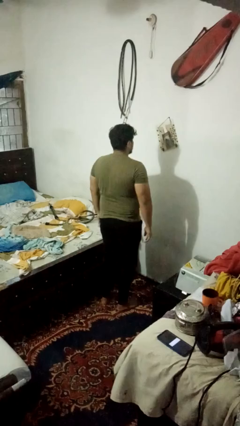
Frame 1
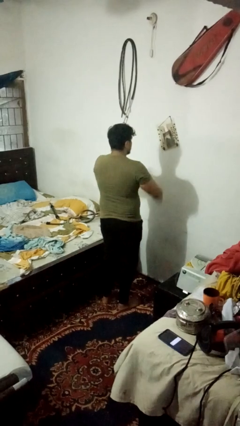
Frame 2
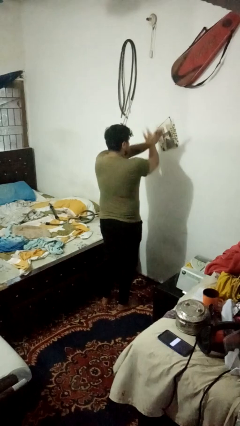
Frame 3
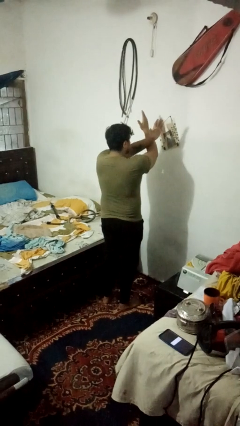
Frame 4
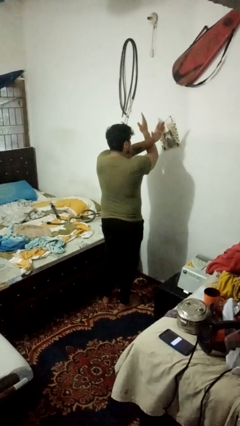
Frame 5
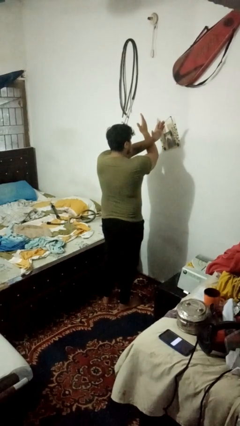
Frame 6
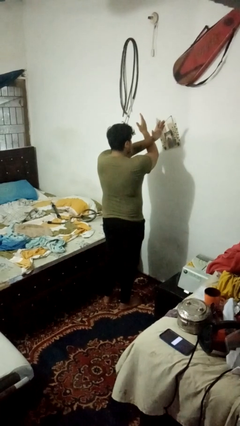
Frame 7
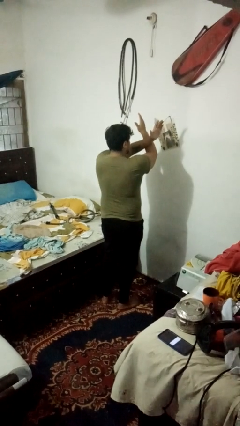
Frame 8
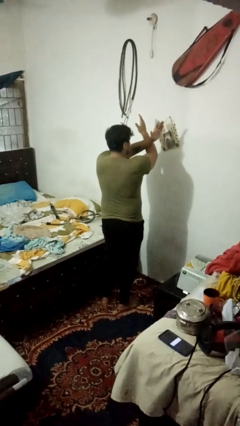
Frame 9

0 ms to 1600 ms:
person gestures arms x

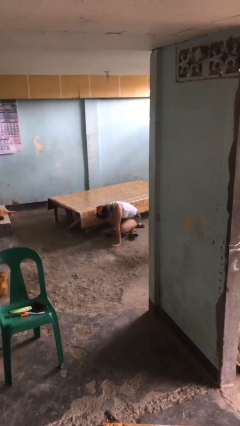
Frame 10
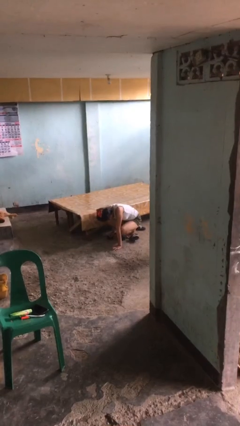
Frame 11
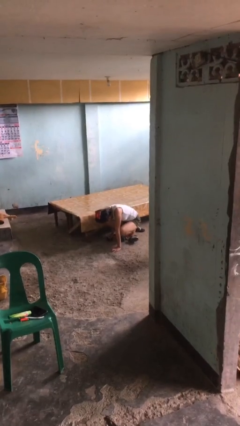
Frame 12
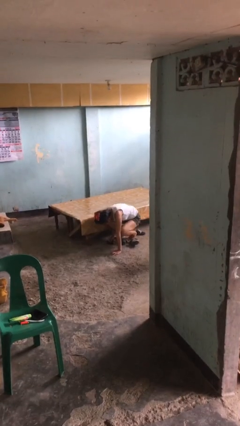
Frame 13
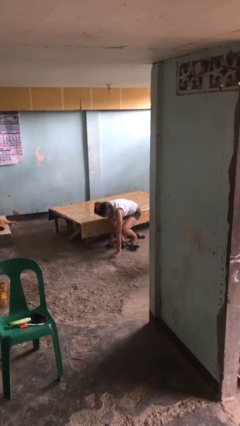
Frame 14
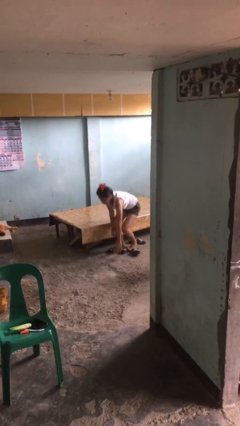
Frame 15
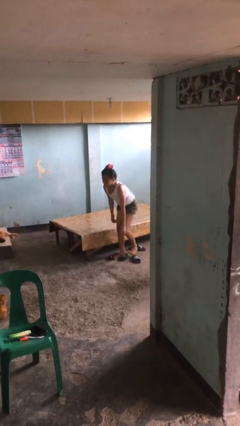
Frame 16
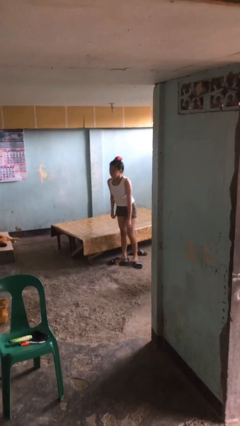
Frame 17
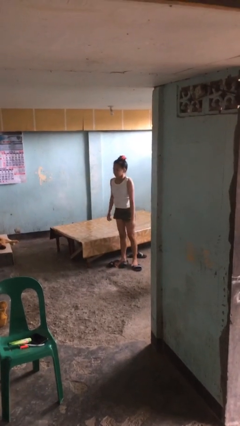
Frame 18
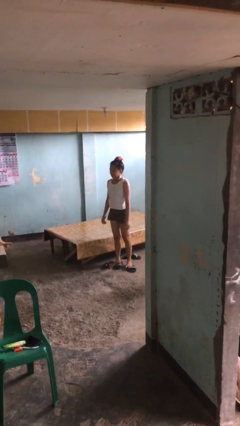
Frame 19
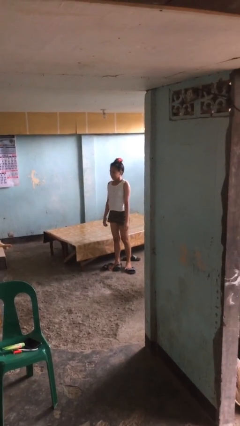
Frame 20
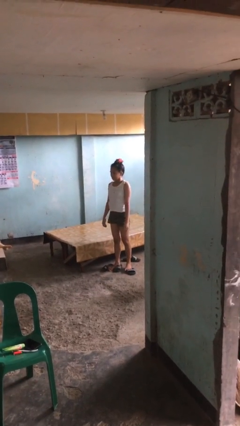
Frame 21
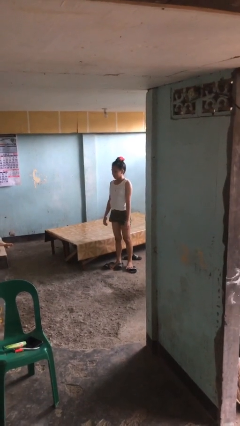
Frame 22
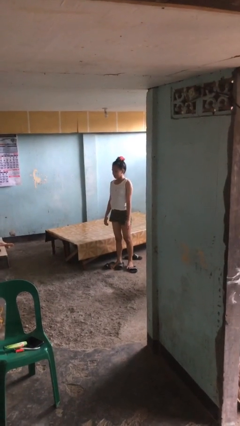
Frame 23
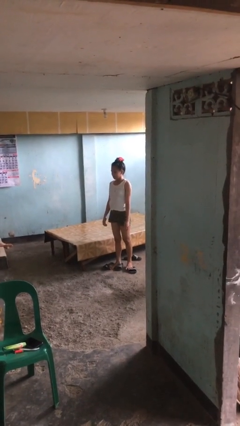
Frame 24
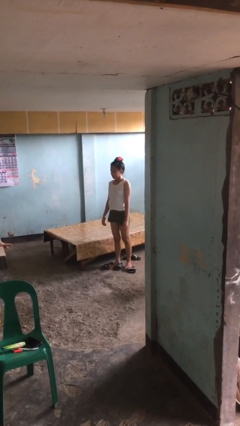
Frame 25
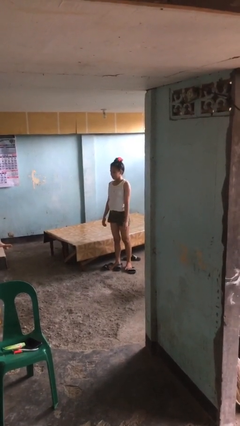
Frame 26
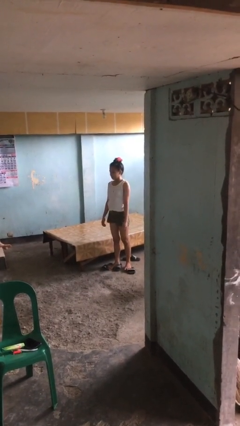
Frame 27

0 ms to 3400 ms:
person stands up from floor

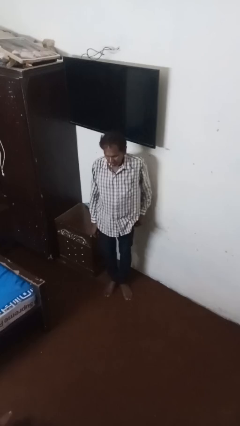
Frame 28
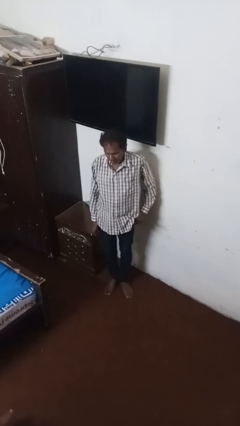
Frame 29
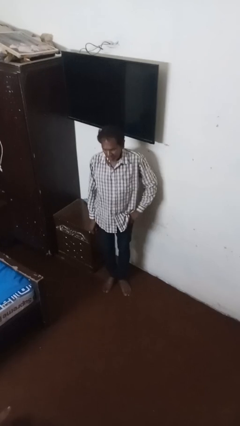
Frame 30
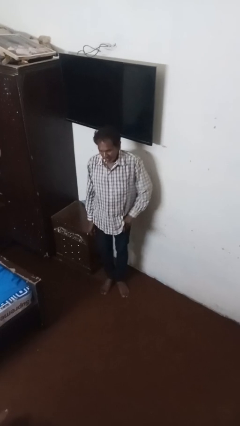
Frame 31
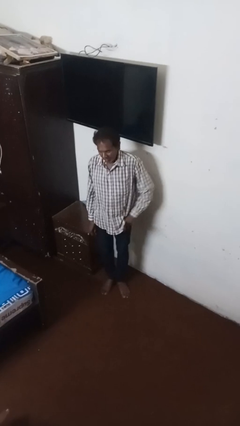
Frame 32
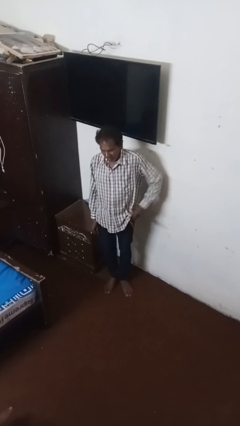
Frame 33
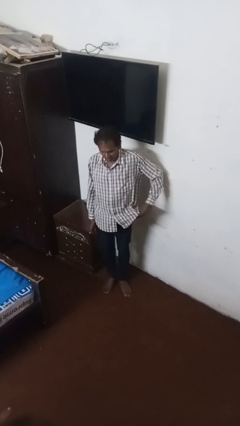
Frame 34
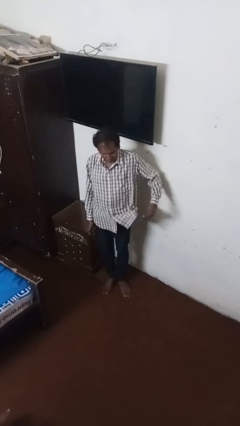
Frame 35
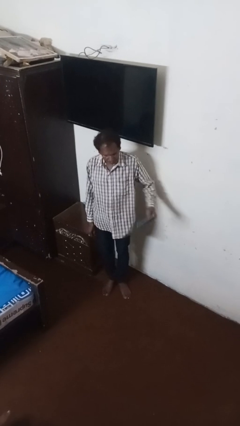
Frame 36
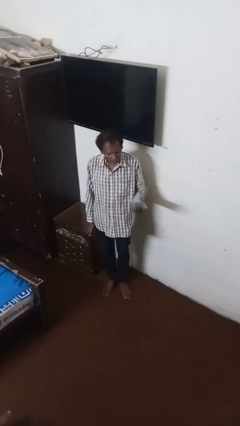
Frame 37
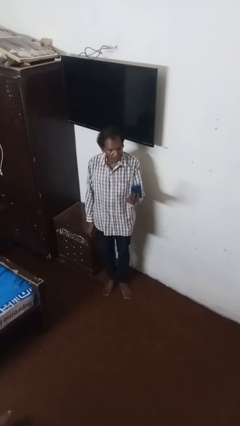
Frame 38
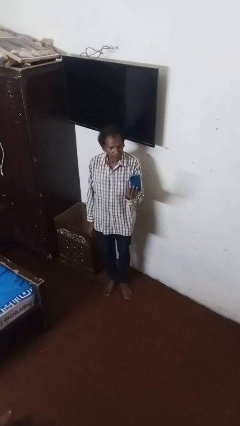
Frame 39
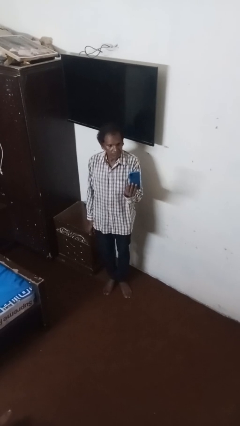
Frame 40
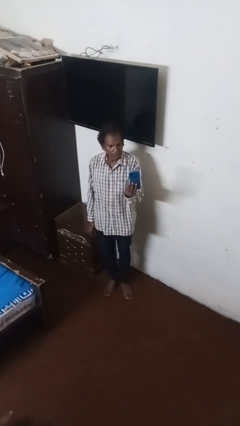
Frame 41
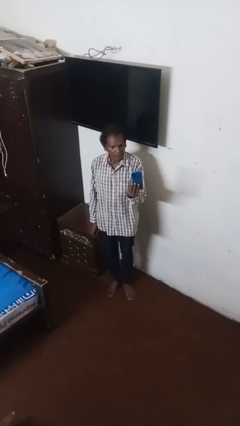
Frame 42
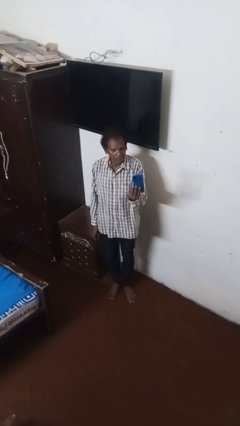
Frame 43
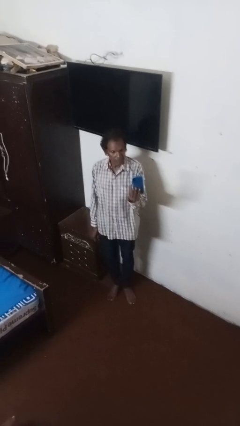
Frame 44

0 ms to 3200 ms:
person takes phone from pocket

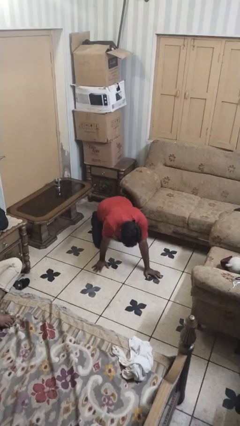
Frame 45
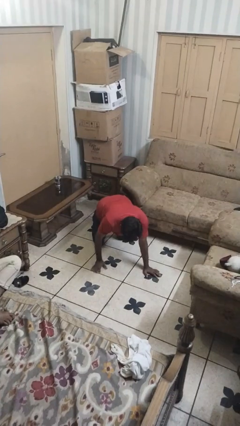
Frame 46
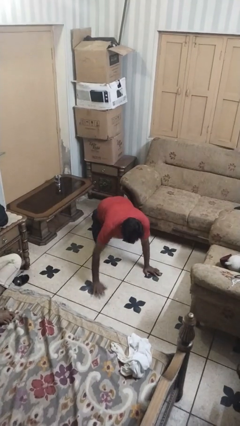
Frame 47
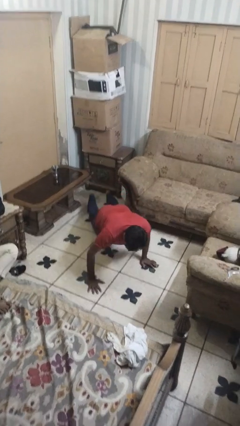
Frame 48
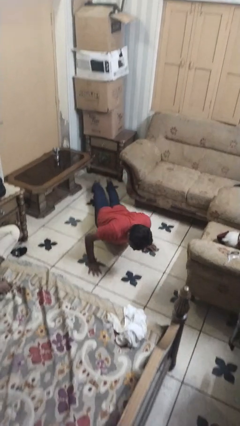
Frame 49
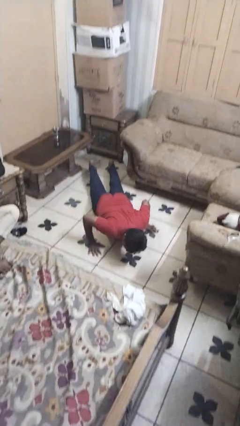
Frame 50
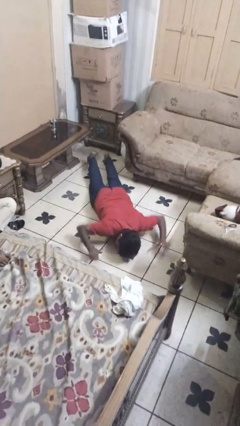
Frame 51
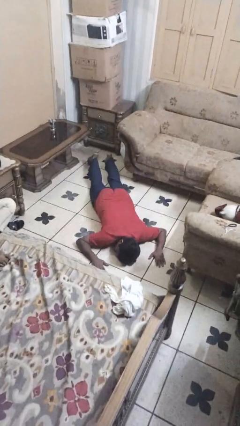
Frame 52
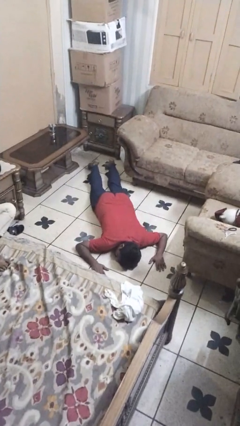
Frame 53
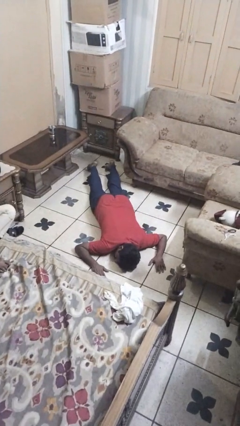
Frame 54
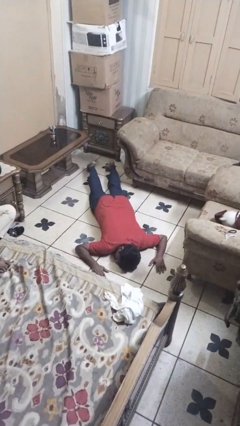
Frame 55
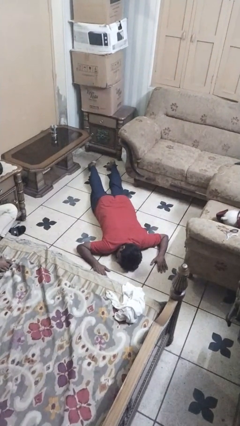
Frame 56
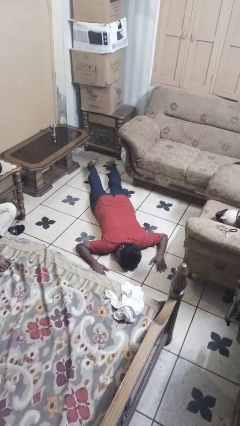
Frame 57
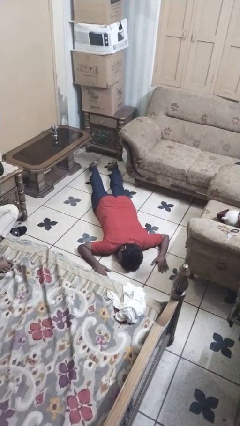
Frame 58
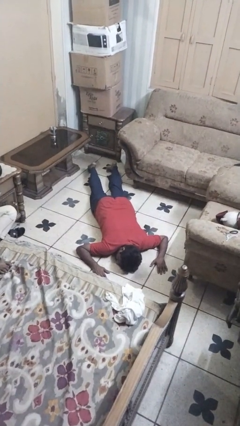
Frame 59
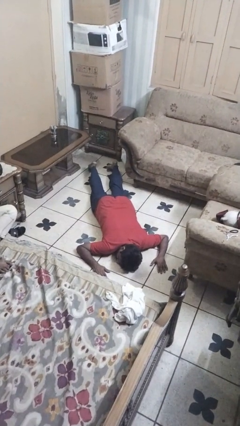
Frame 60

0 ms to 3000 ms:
person lies down on floor

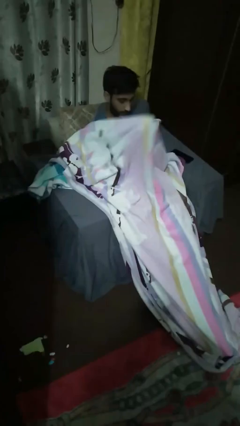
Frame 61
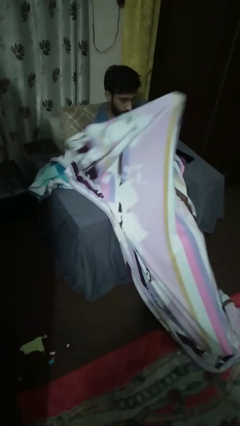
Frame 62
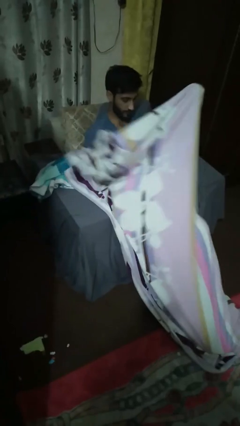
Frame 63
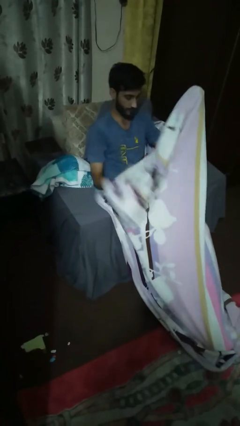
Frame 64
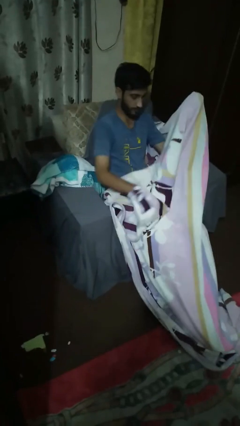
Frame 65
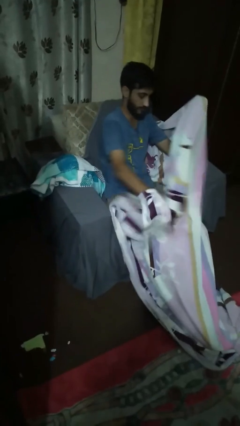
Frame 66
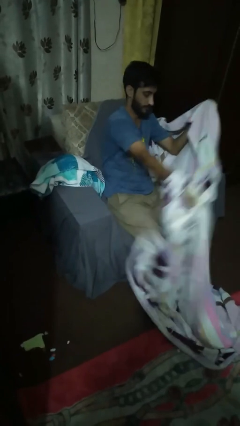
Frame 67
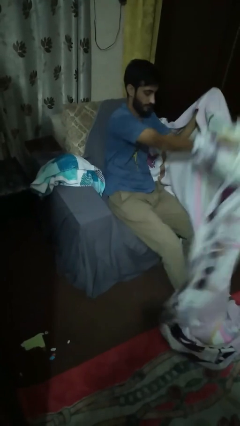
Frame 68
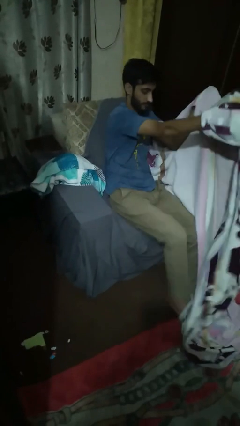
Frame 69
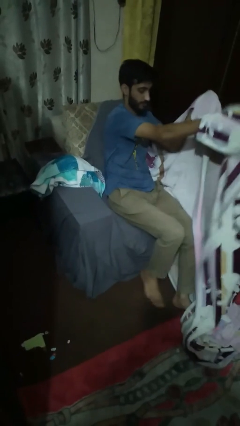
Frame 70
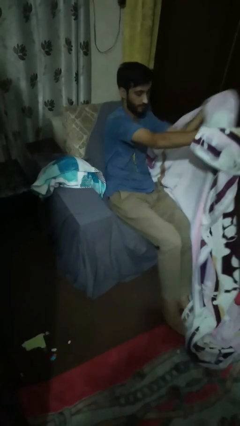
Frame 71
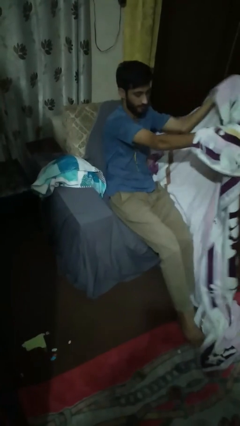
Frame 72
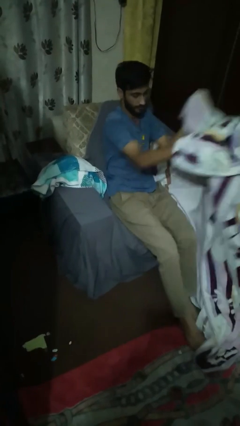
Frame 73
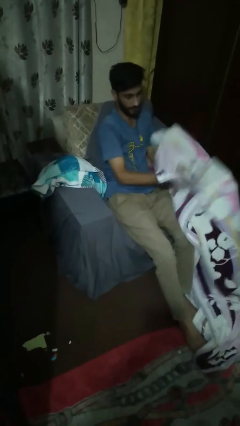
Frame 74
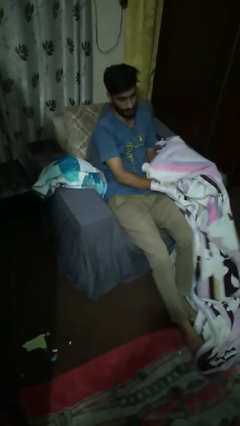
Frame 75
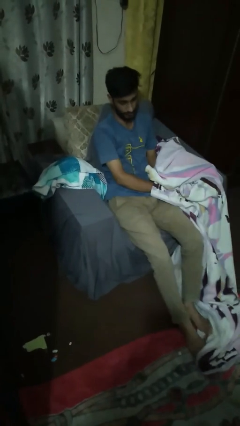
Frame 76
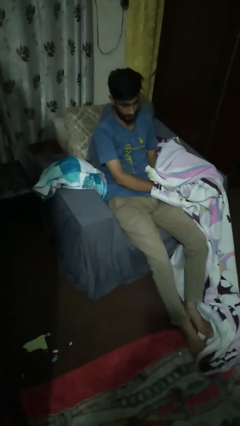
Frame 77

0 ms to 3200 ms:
person uncovers with blanket

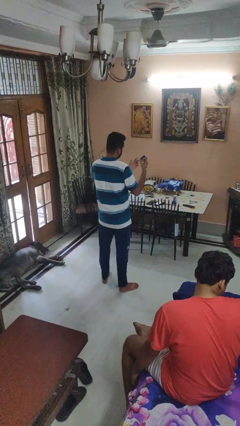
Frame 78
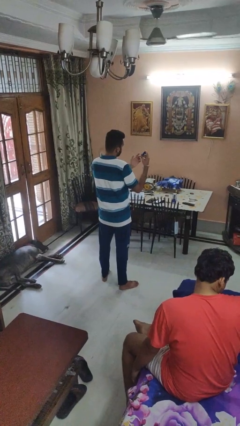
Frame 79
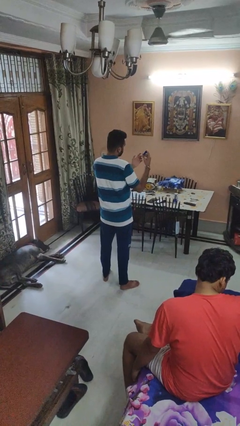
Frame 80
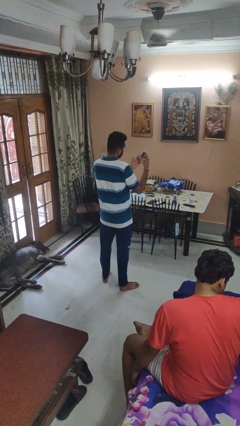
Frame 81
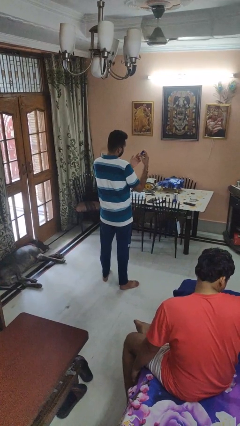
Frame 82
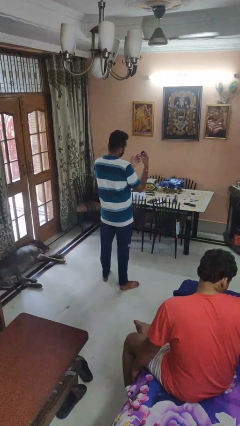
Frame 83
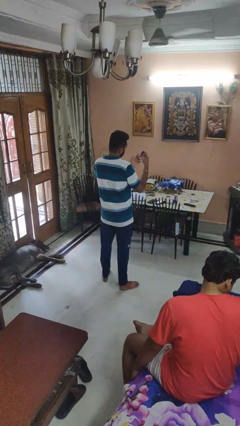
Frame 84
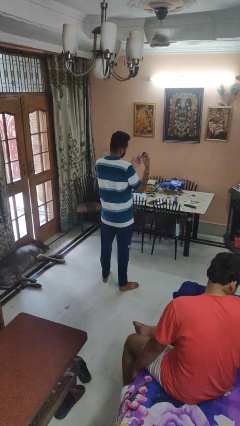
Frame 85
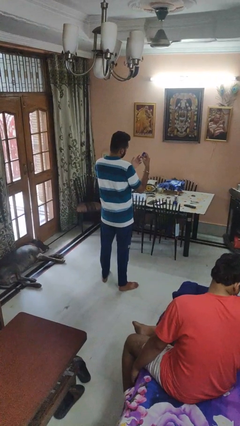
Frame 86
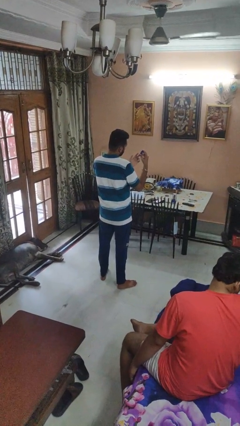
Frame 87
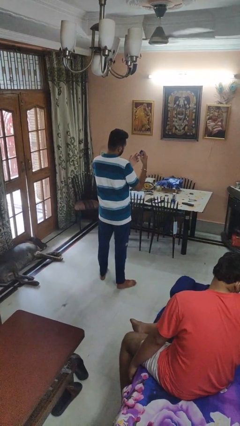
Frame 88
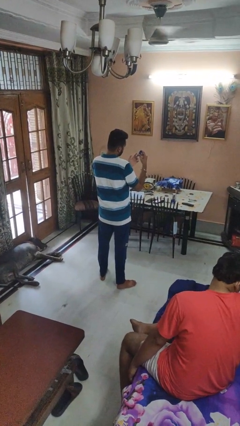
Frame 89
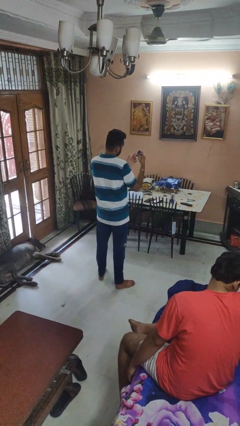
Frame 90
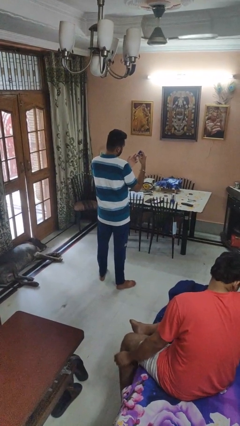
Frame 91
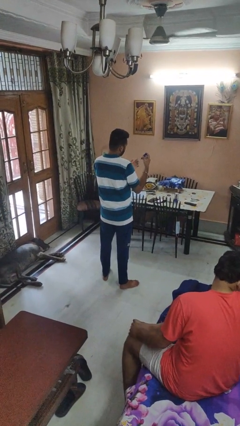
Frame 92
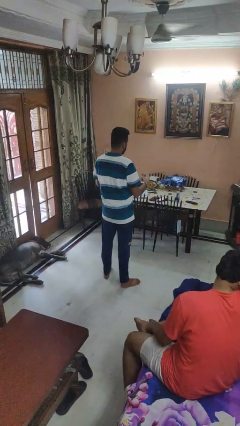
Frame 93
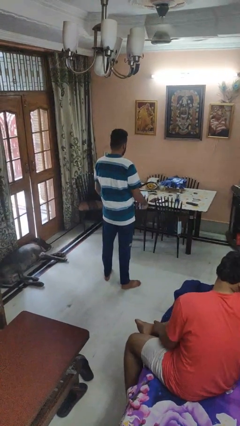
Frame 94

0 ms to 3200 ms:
person clips fingernails
